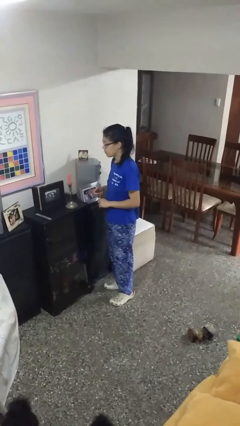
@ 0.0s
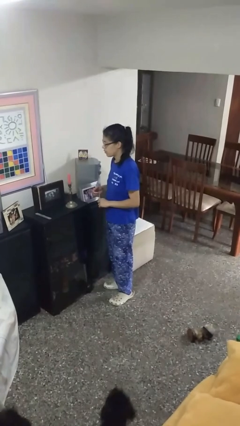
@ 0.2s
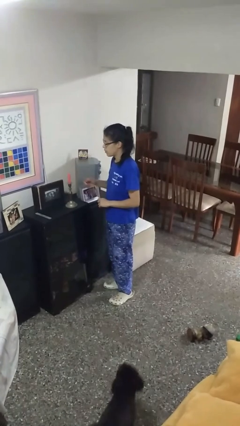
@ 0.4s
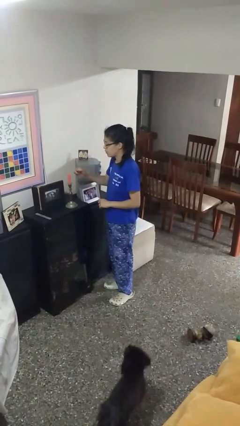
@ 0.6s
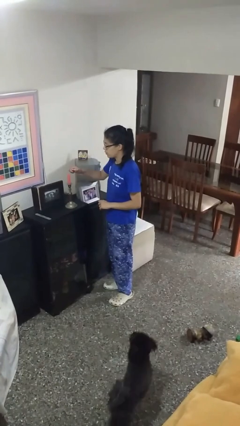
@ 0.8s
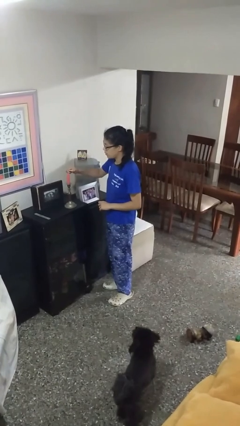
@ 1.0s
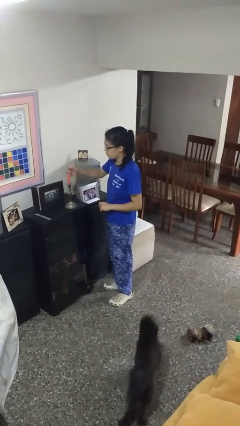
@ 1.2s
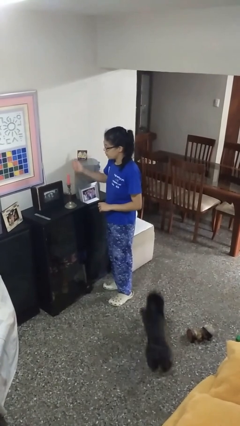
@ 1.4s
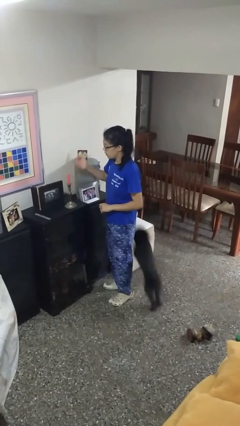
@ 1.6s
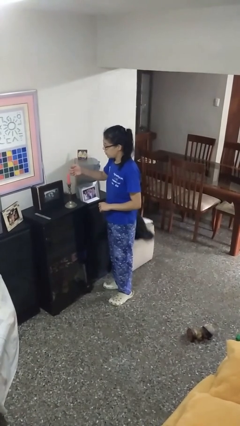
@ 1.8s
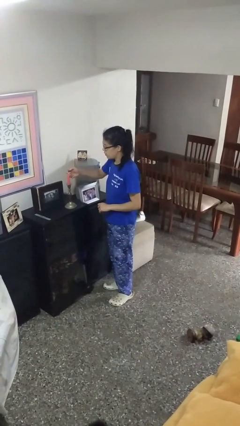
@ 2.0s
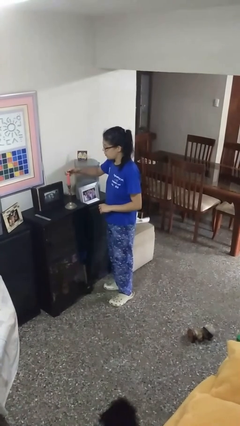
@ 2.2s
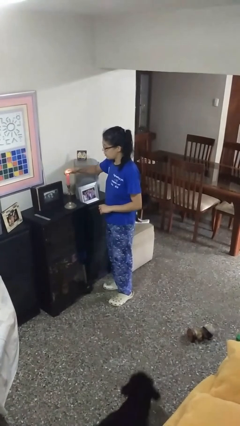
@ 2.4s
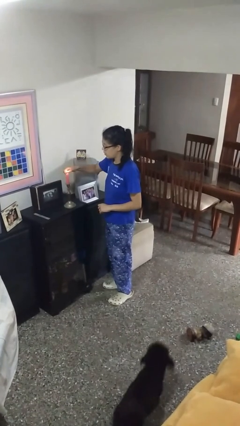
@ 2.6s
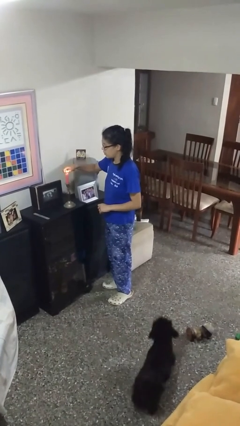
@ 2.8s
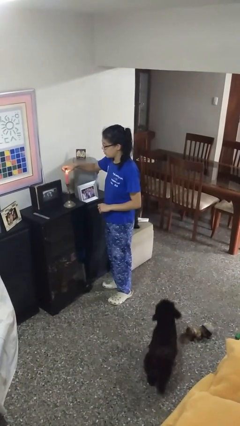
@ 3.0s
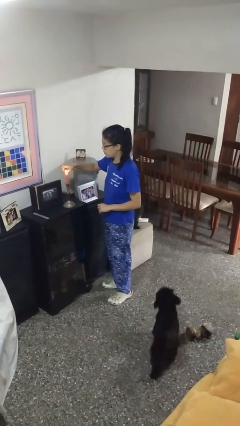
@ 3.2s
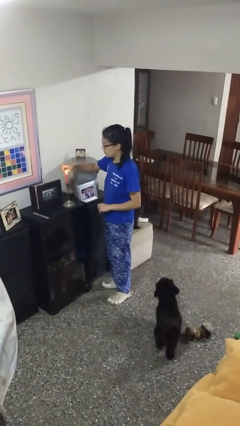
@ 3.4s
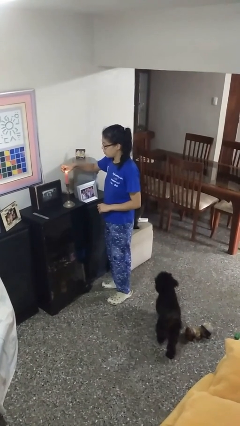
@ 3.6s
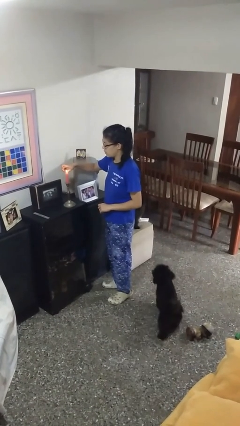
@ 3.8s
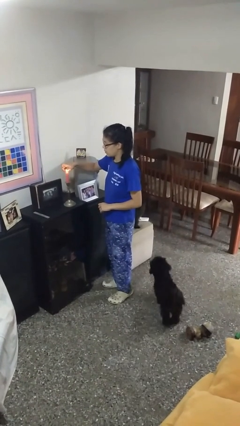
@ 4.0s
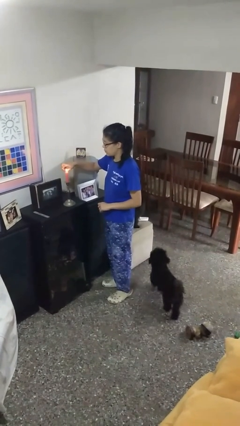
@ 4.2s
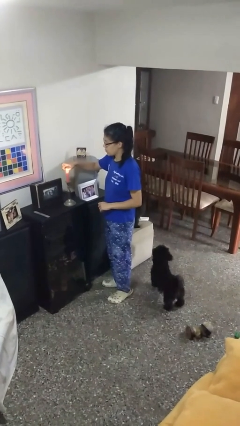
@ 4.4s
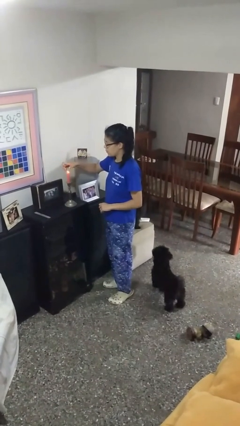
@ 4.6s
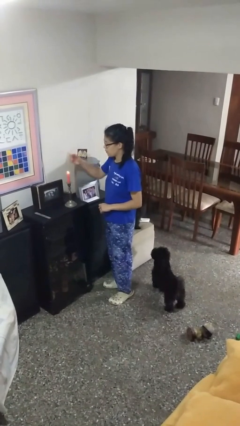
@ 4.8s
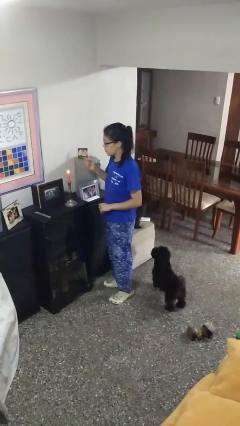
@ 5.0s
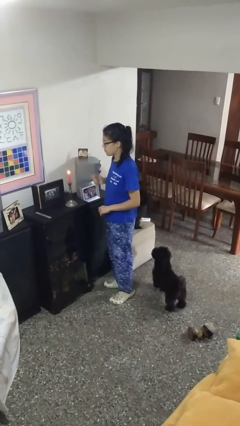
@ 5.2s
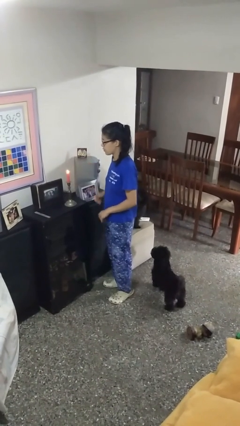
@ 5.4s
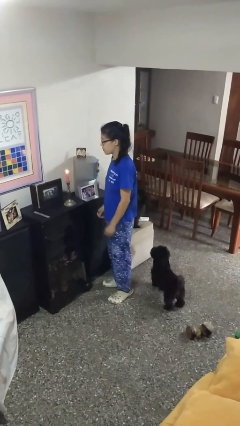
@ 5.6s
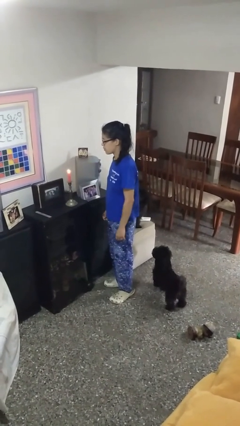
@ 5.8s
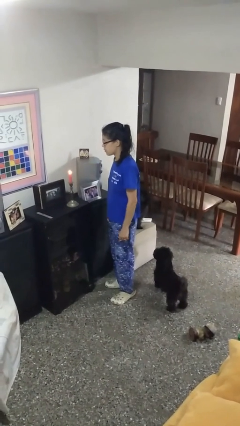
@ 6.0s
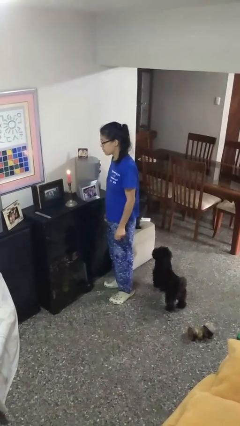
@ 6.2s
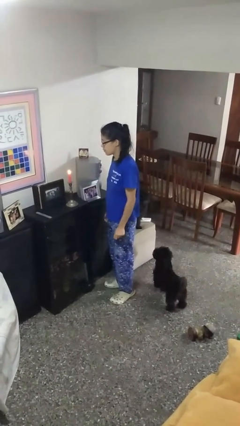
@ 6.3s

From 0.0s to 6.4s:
person lights candle

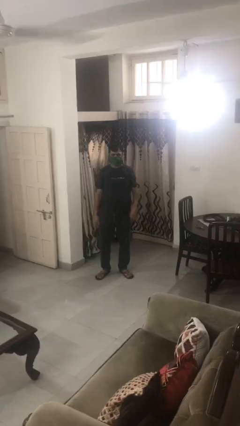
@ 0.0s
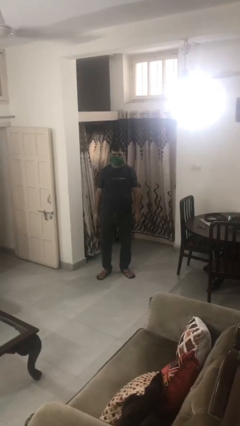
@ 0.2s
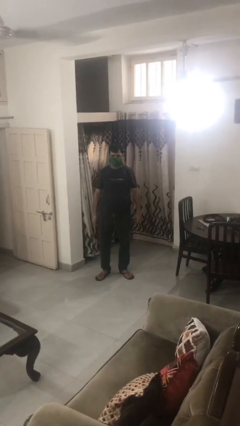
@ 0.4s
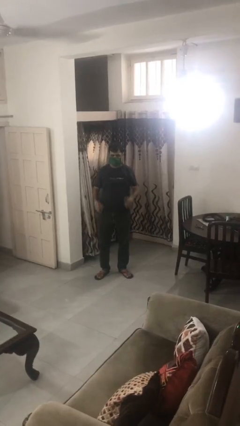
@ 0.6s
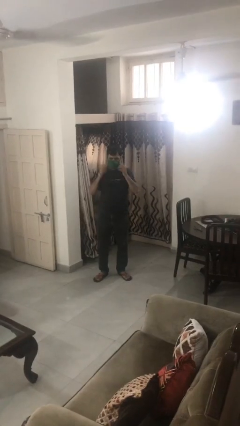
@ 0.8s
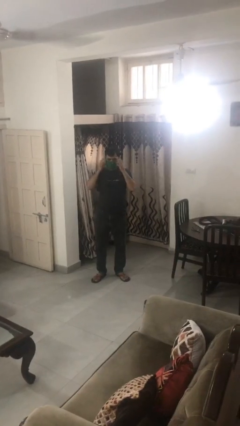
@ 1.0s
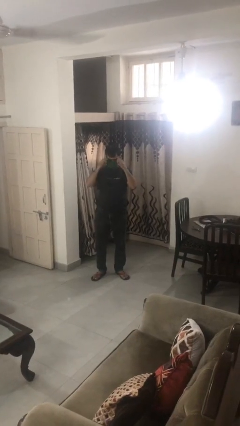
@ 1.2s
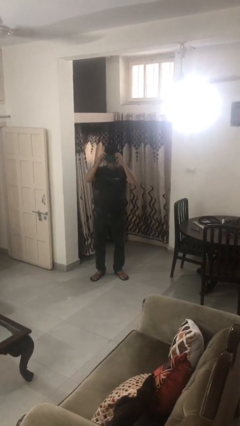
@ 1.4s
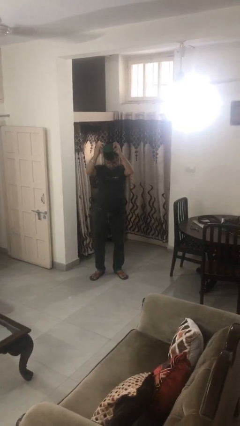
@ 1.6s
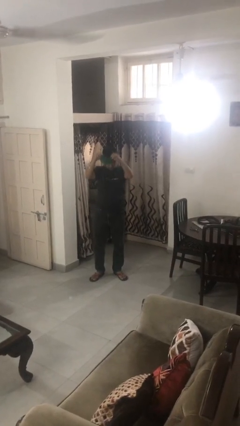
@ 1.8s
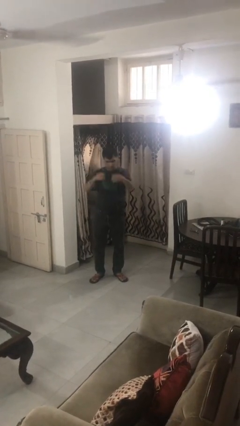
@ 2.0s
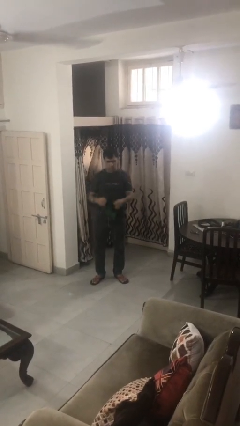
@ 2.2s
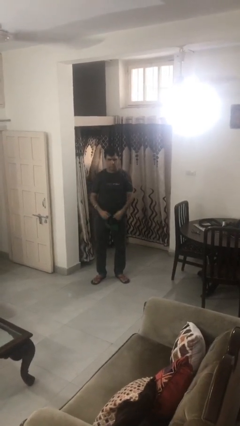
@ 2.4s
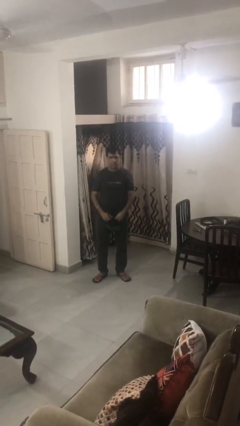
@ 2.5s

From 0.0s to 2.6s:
person takes off facemask

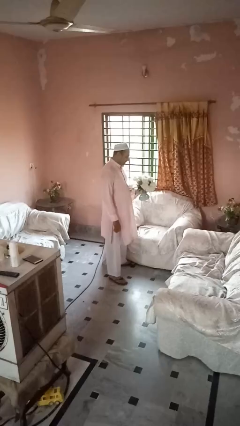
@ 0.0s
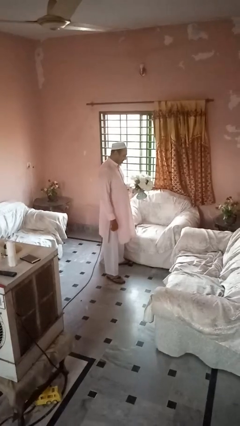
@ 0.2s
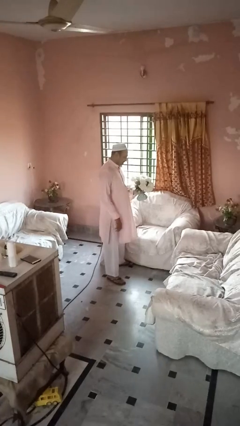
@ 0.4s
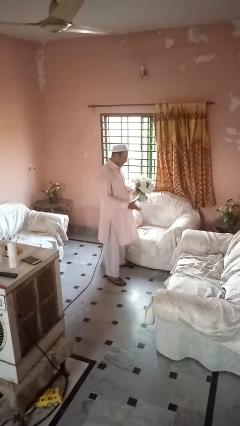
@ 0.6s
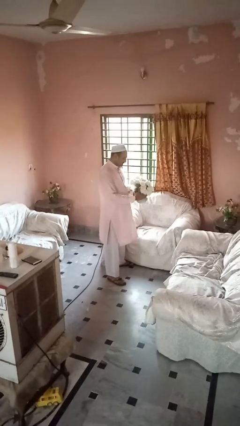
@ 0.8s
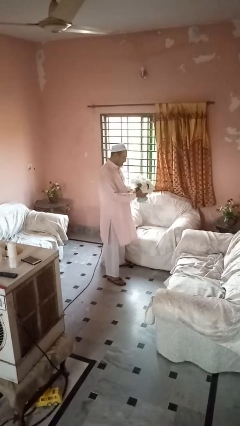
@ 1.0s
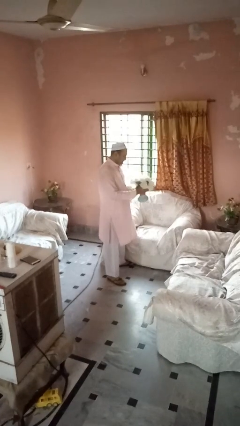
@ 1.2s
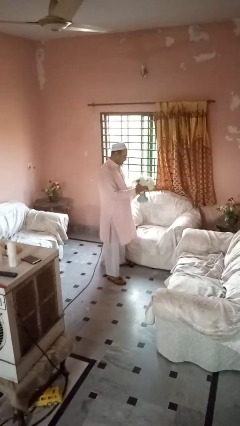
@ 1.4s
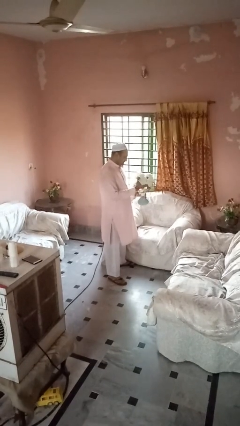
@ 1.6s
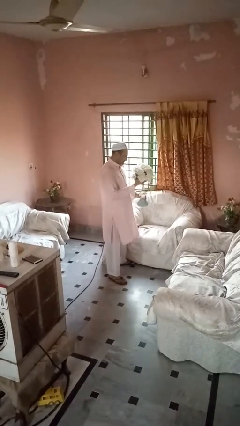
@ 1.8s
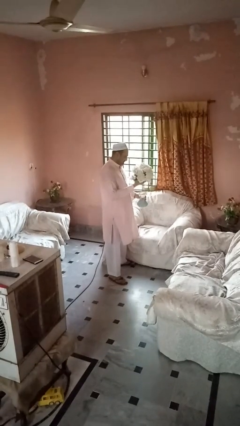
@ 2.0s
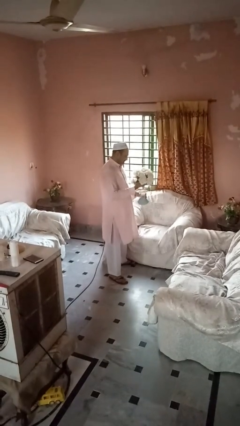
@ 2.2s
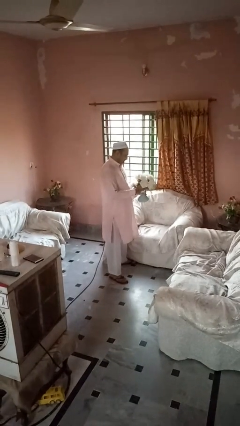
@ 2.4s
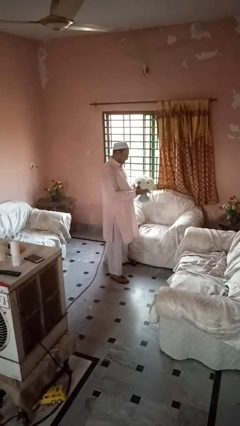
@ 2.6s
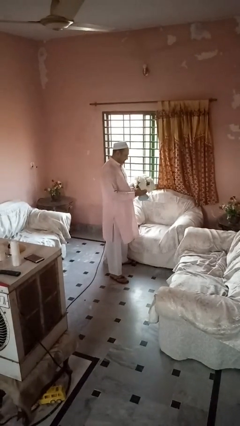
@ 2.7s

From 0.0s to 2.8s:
person arranges flowers in vase

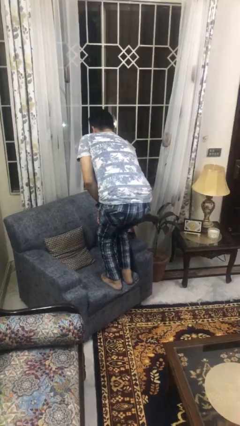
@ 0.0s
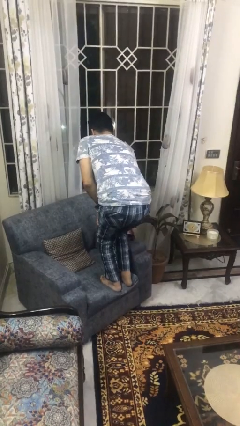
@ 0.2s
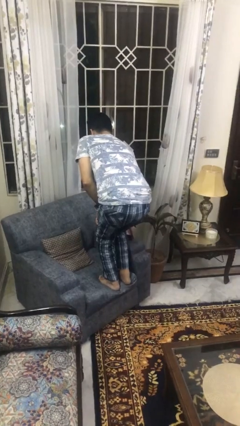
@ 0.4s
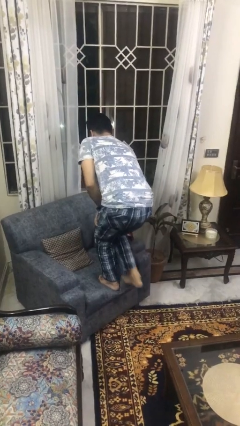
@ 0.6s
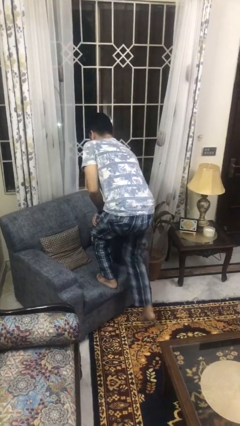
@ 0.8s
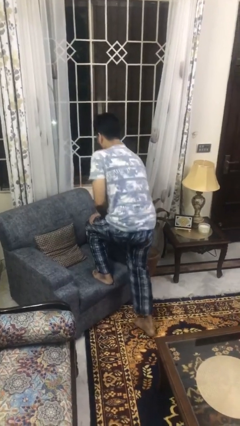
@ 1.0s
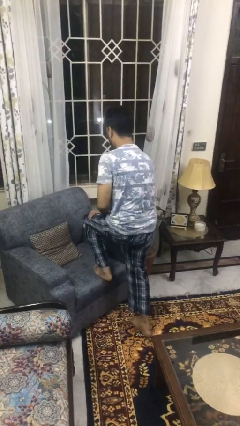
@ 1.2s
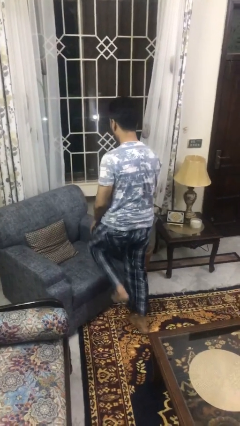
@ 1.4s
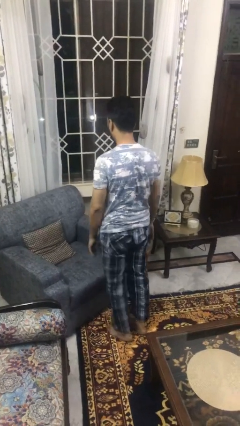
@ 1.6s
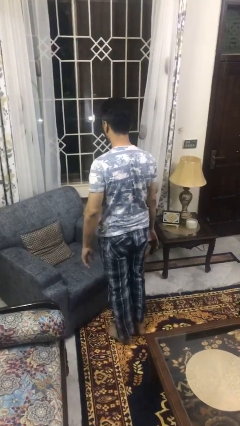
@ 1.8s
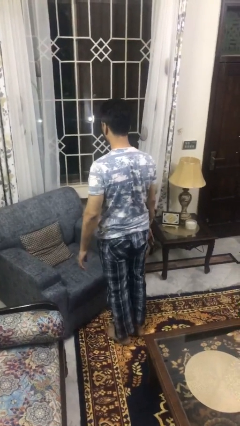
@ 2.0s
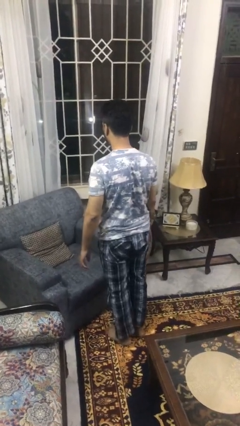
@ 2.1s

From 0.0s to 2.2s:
person climbs off couch

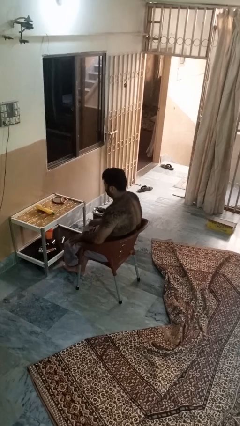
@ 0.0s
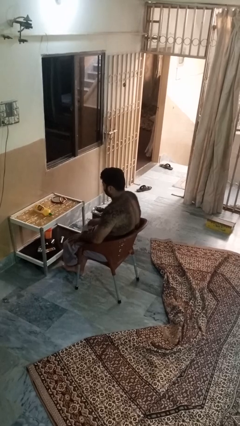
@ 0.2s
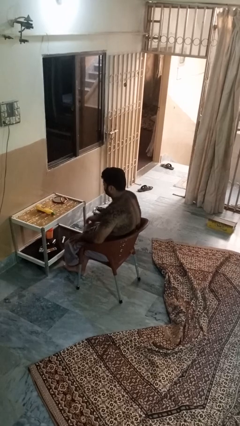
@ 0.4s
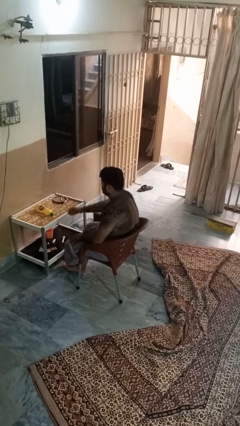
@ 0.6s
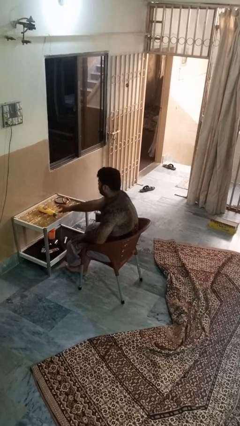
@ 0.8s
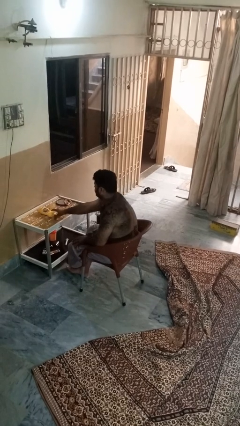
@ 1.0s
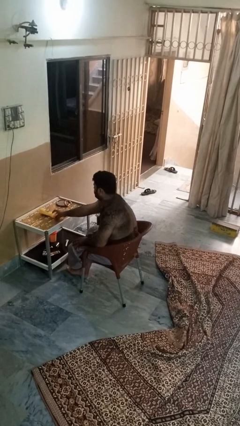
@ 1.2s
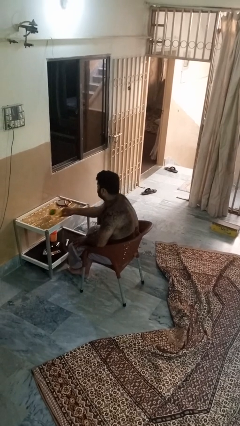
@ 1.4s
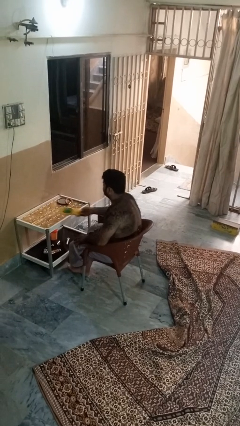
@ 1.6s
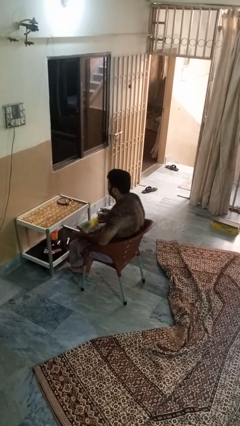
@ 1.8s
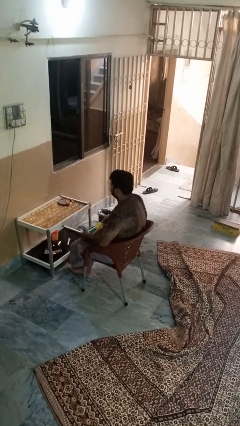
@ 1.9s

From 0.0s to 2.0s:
person picks up object from table

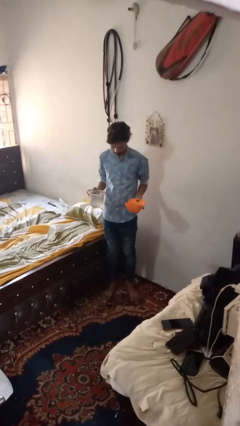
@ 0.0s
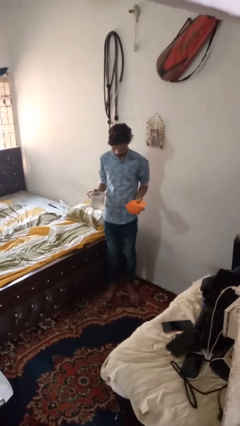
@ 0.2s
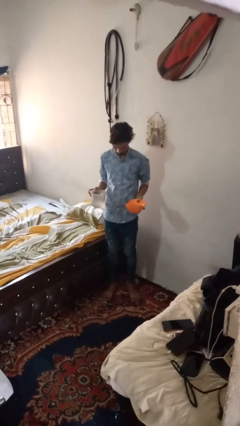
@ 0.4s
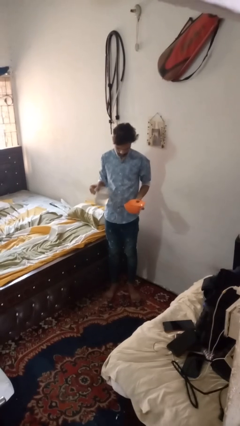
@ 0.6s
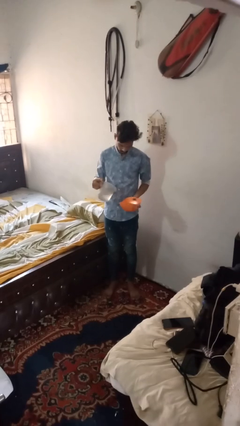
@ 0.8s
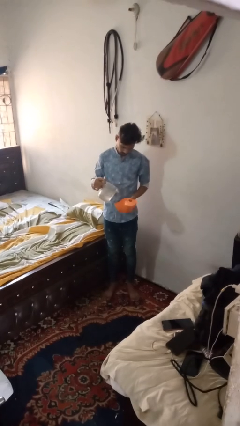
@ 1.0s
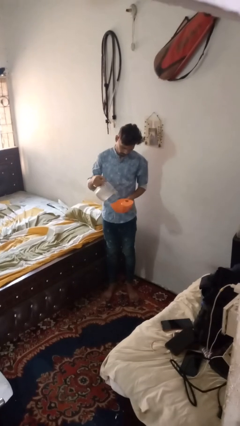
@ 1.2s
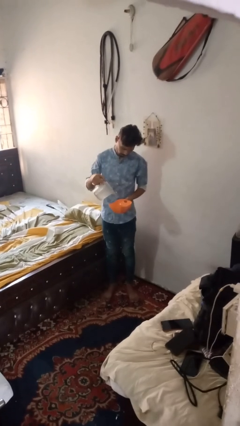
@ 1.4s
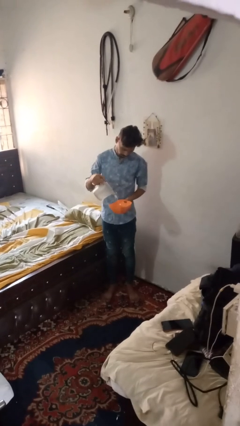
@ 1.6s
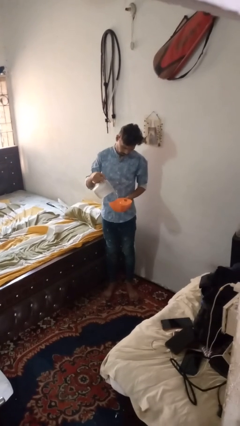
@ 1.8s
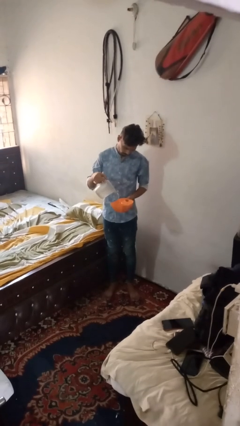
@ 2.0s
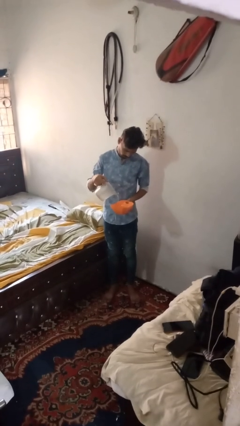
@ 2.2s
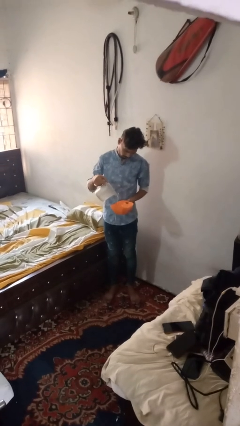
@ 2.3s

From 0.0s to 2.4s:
person pours into bowl
